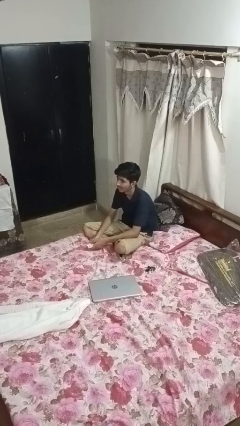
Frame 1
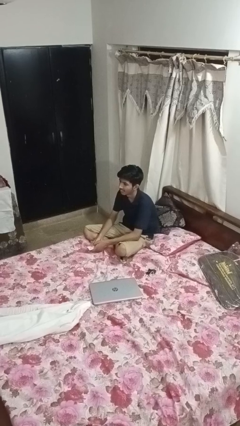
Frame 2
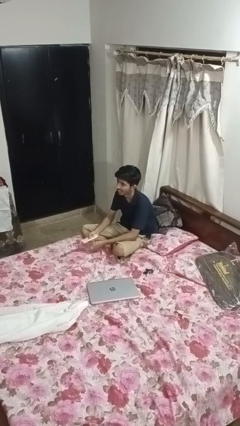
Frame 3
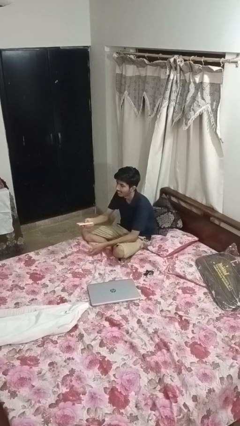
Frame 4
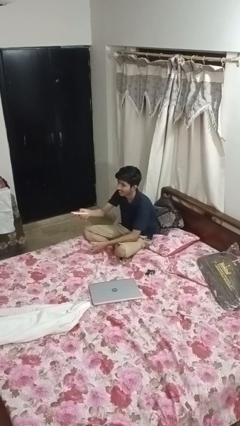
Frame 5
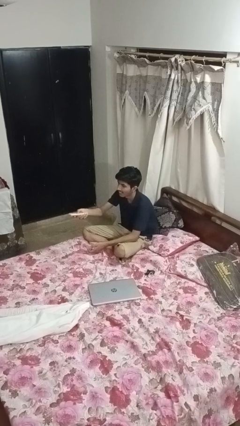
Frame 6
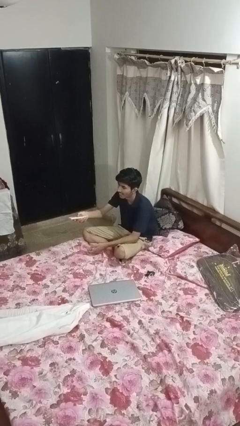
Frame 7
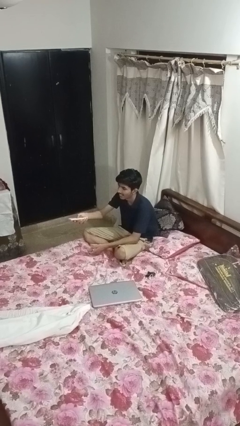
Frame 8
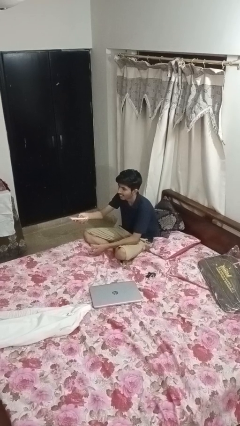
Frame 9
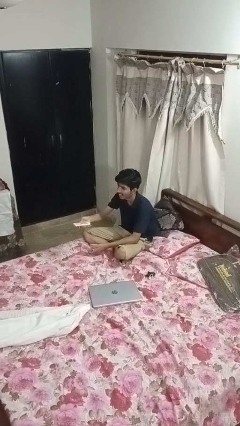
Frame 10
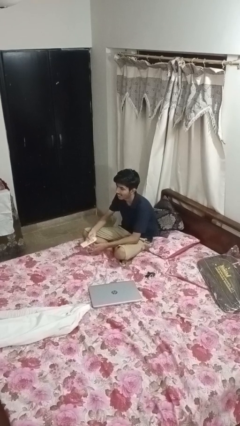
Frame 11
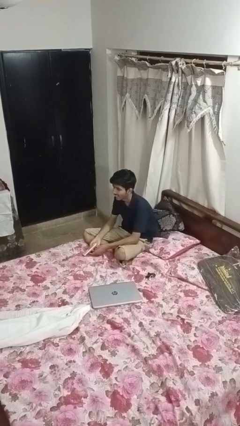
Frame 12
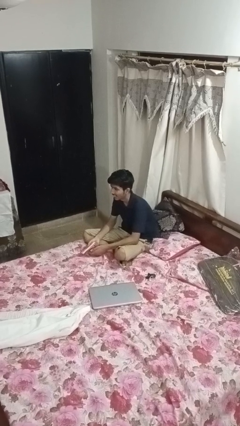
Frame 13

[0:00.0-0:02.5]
person uses television remote

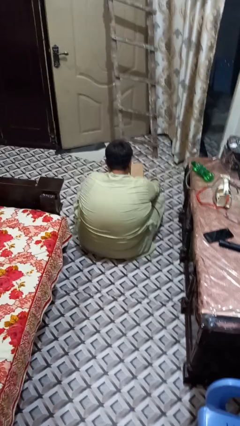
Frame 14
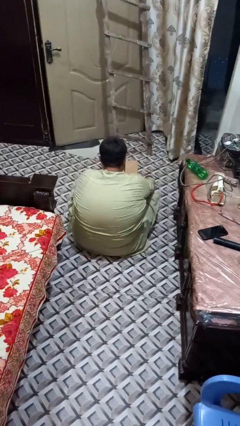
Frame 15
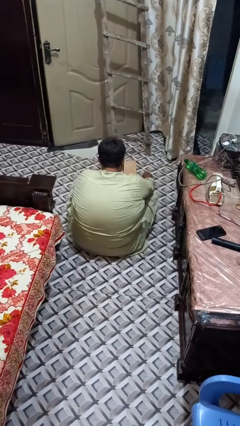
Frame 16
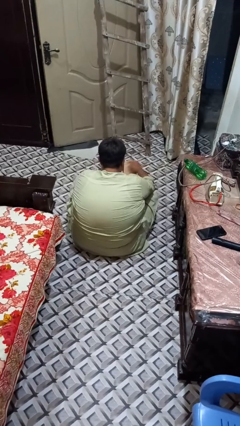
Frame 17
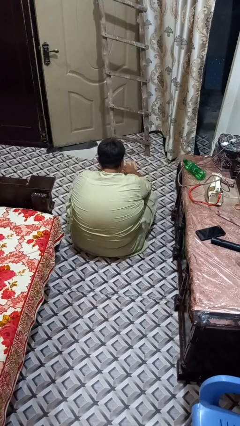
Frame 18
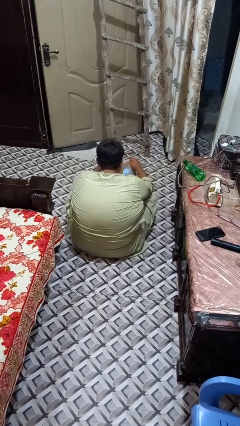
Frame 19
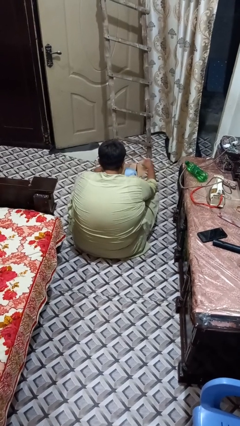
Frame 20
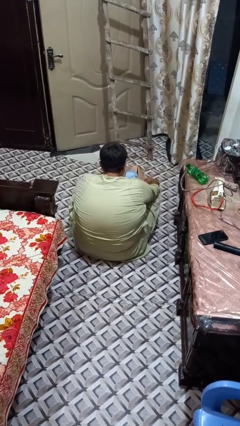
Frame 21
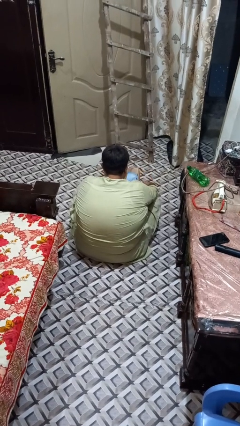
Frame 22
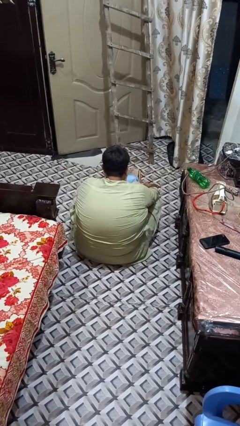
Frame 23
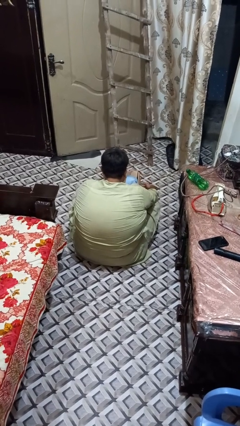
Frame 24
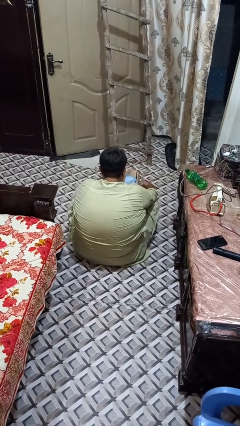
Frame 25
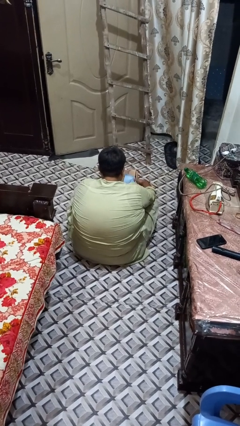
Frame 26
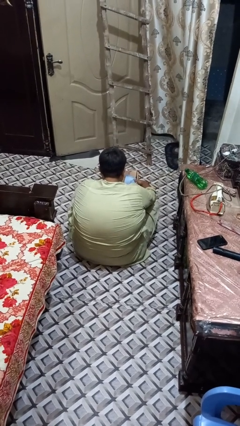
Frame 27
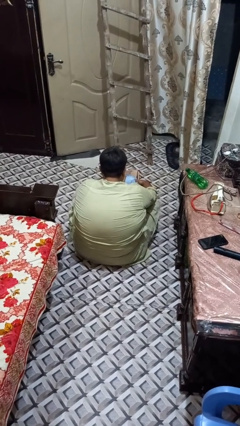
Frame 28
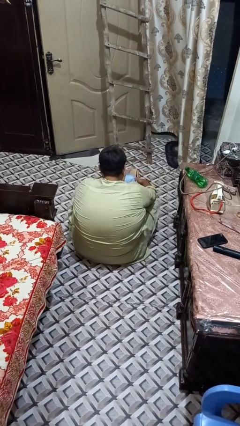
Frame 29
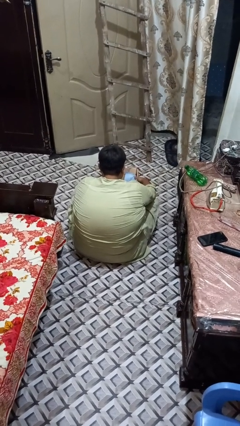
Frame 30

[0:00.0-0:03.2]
person opens box

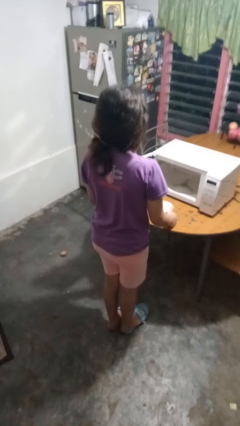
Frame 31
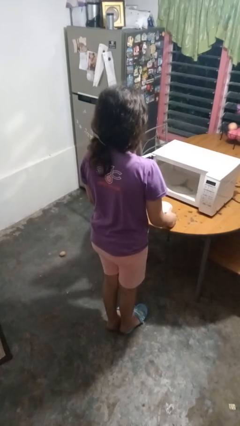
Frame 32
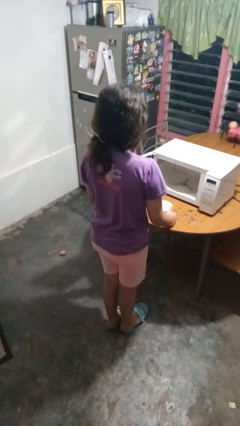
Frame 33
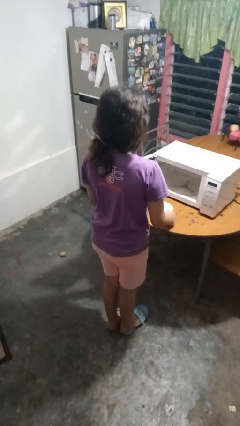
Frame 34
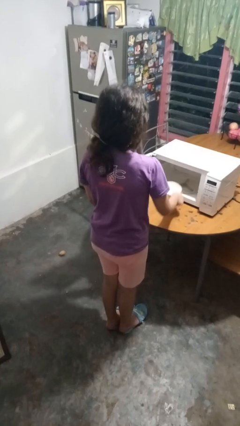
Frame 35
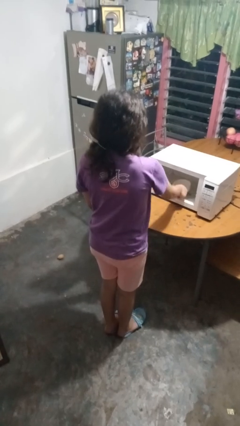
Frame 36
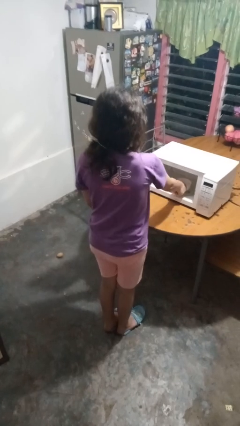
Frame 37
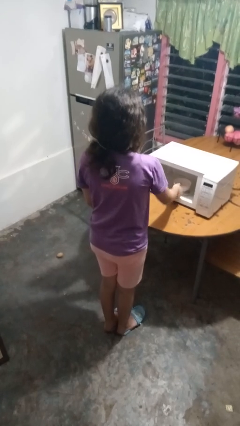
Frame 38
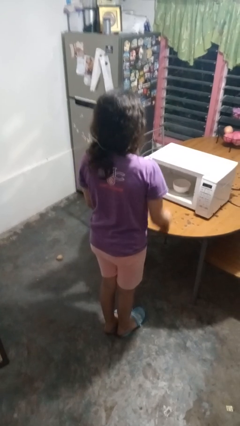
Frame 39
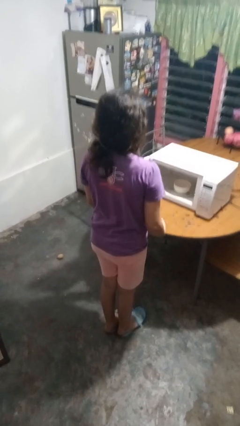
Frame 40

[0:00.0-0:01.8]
person puts object into microwave

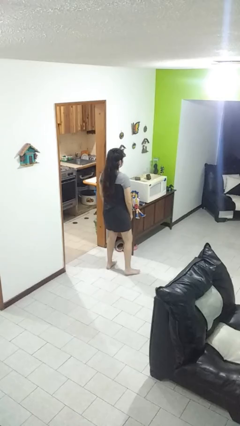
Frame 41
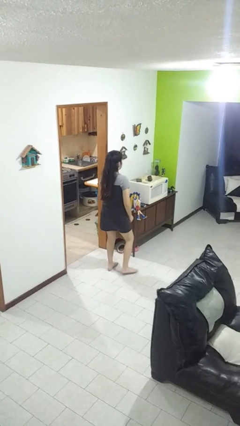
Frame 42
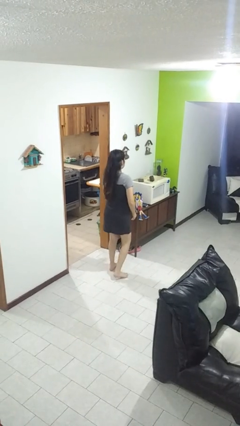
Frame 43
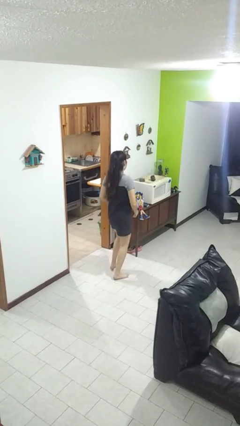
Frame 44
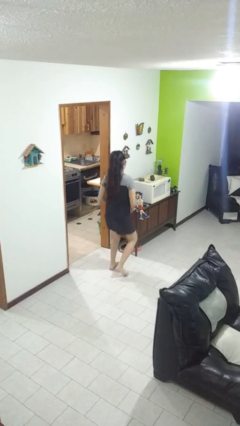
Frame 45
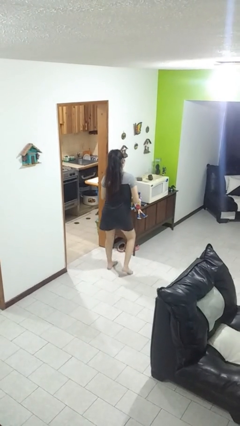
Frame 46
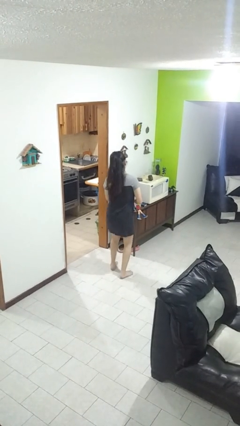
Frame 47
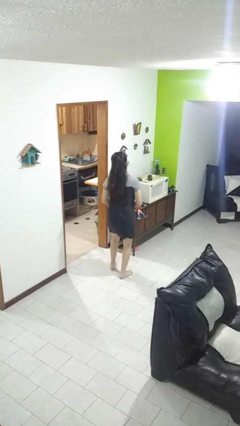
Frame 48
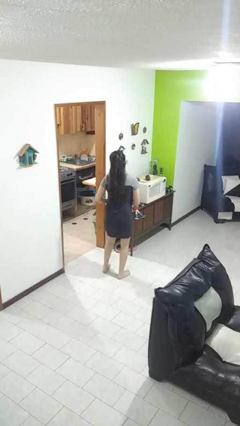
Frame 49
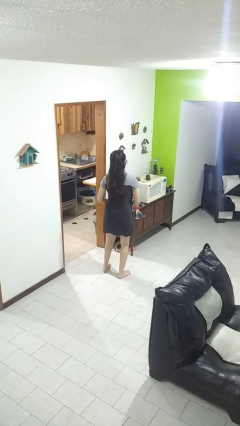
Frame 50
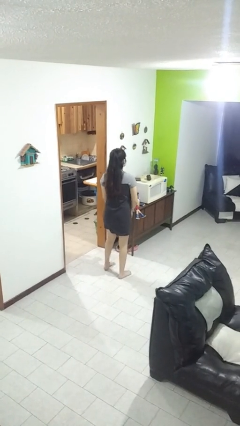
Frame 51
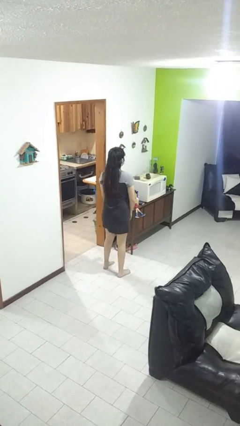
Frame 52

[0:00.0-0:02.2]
person dances in place

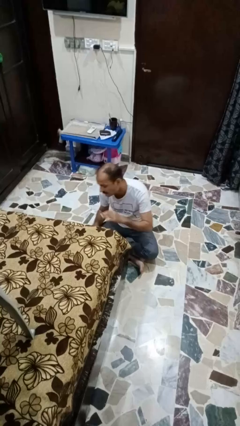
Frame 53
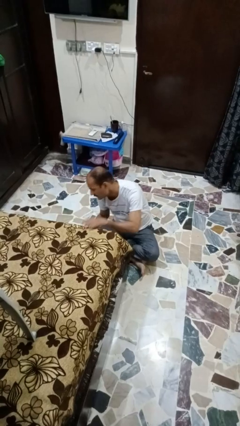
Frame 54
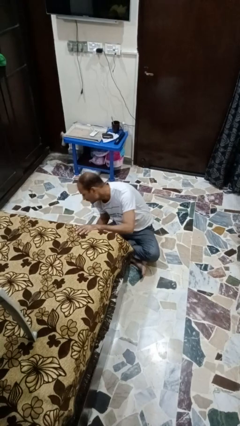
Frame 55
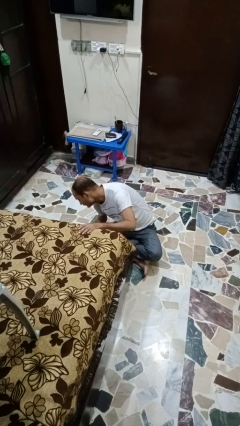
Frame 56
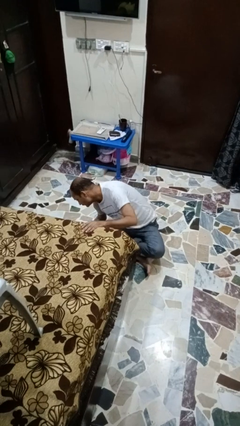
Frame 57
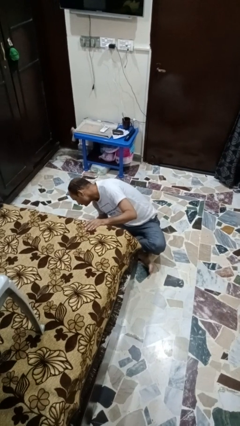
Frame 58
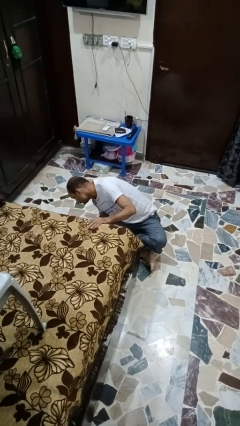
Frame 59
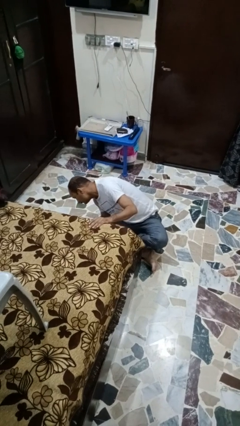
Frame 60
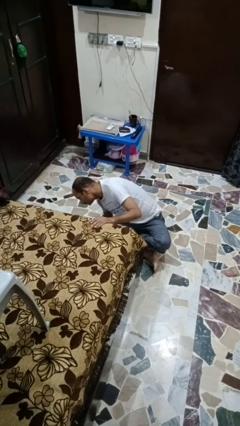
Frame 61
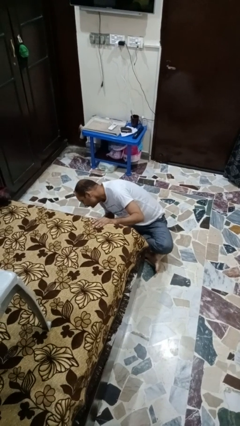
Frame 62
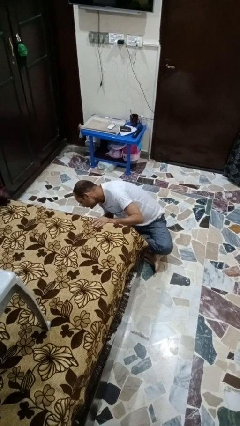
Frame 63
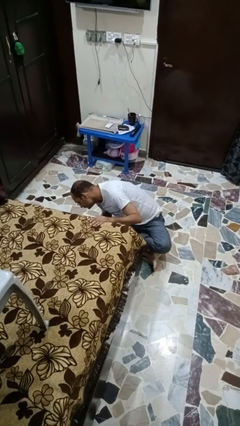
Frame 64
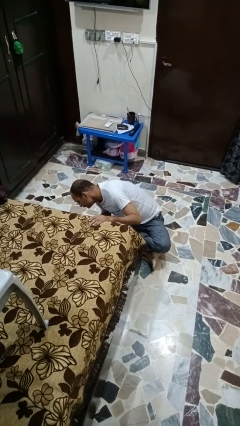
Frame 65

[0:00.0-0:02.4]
person searches under bed

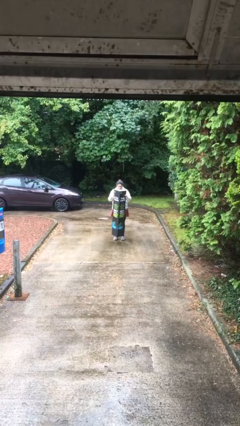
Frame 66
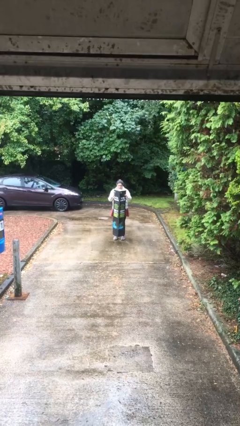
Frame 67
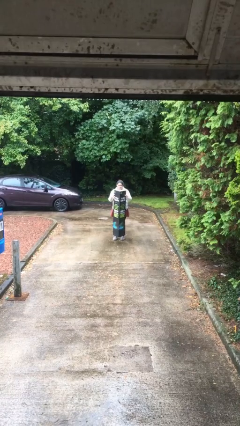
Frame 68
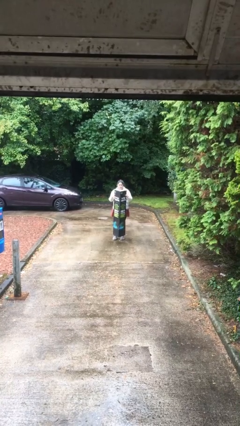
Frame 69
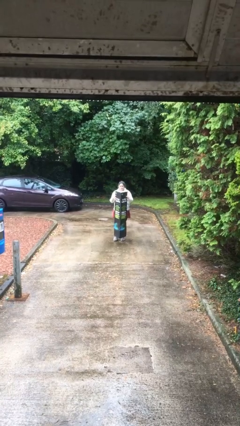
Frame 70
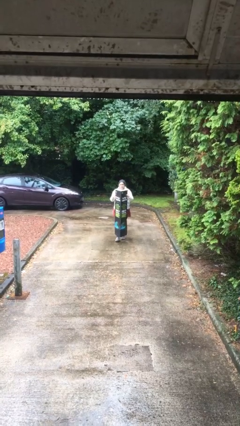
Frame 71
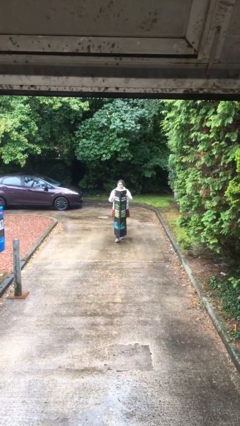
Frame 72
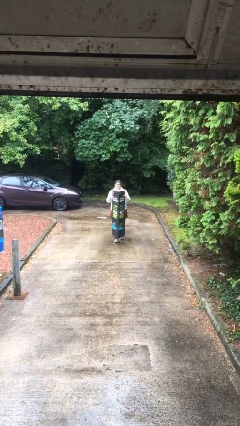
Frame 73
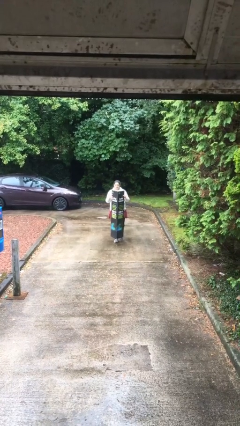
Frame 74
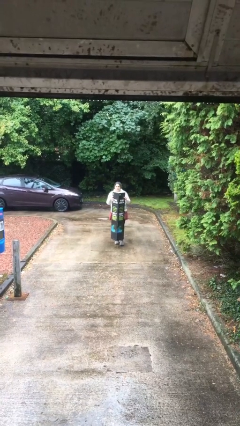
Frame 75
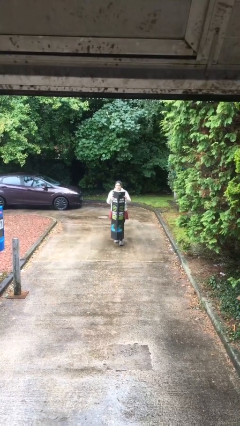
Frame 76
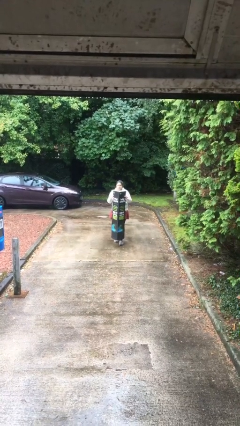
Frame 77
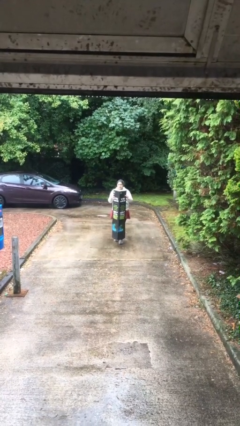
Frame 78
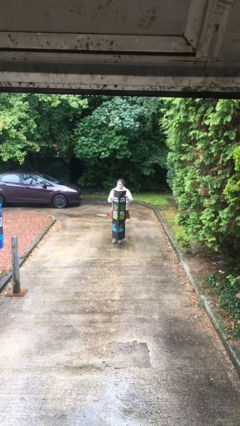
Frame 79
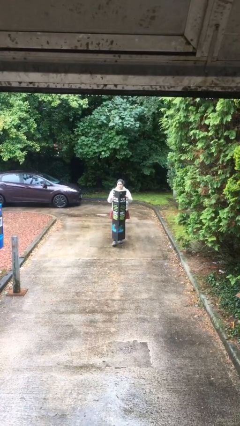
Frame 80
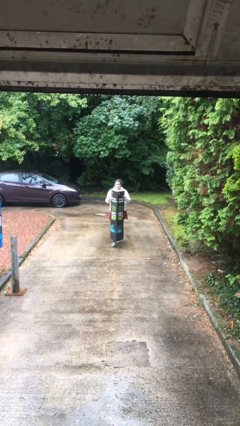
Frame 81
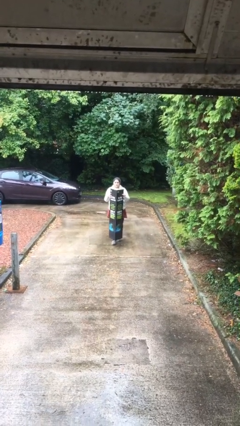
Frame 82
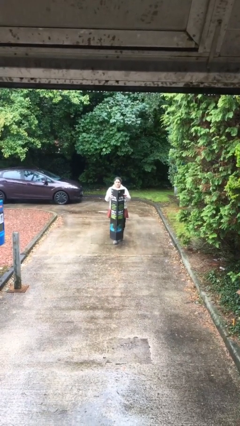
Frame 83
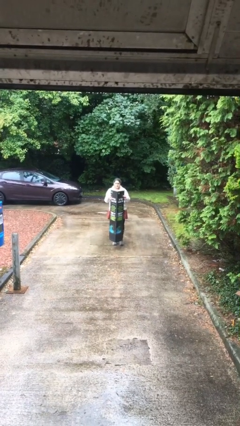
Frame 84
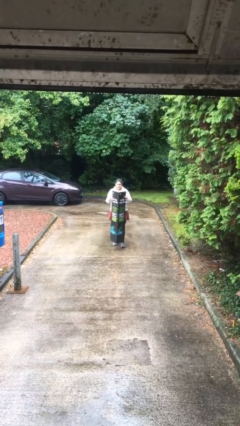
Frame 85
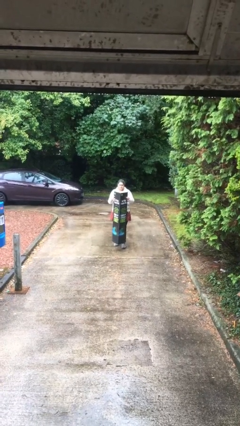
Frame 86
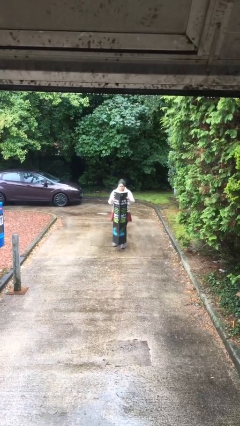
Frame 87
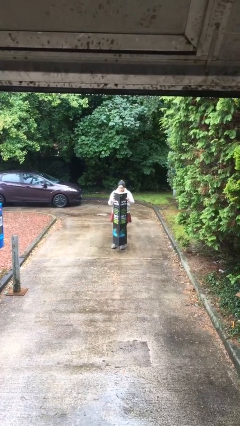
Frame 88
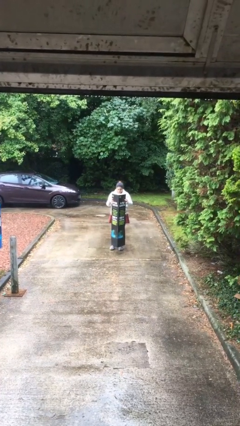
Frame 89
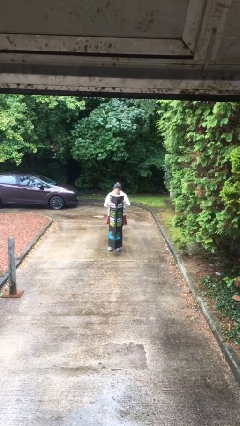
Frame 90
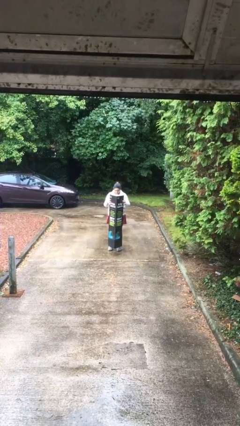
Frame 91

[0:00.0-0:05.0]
person carries heavy object

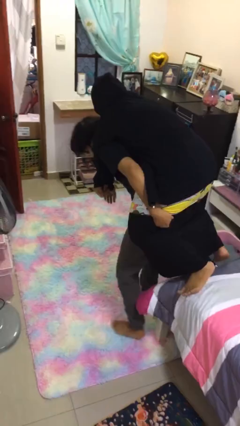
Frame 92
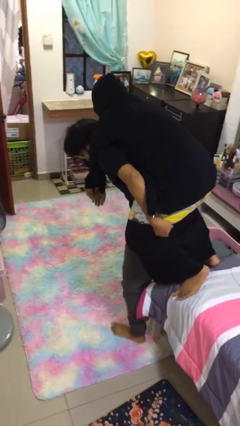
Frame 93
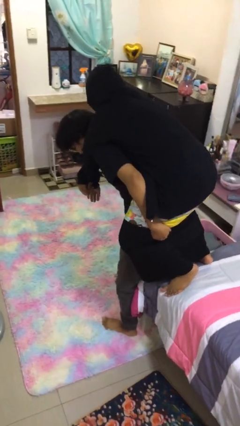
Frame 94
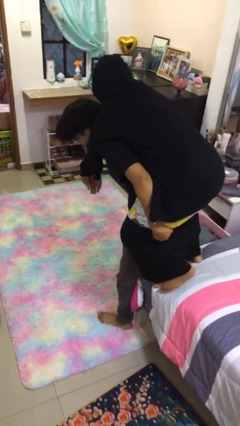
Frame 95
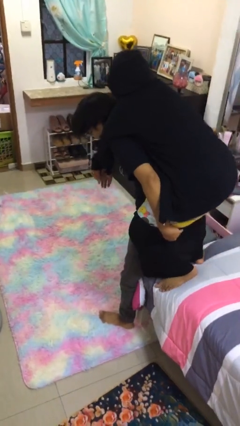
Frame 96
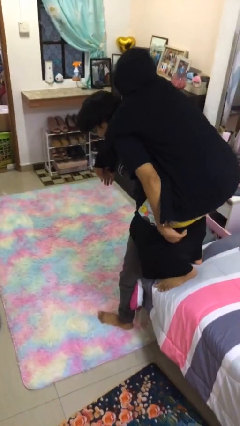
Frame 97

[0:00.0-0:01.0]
person puts down person
